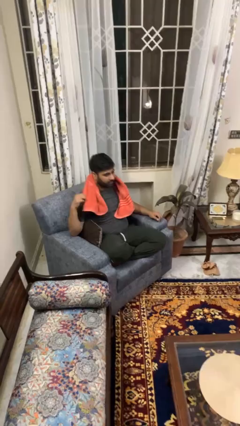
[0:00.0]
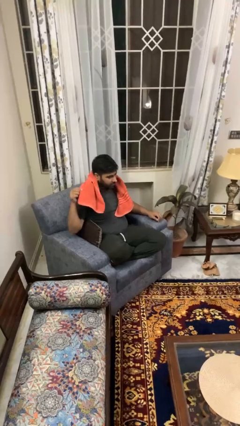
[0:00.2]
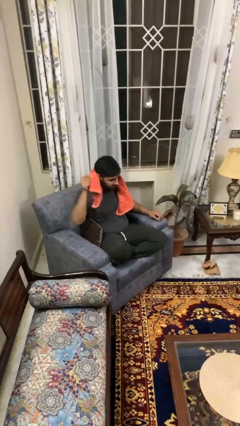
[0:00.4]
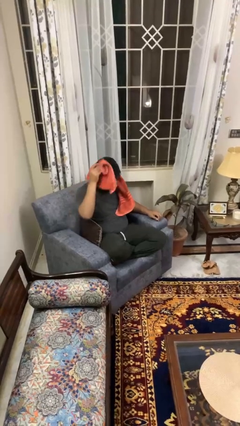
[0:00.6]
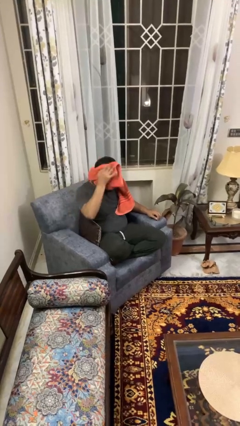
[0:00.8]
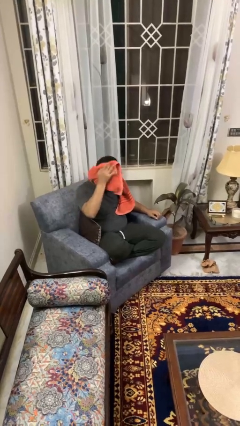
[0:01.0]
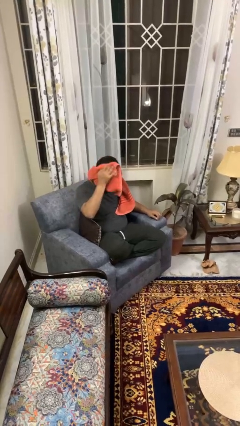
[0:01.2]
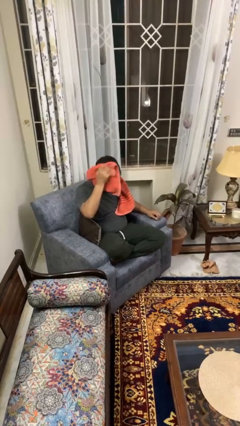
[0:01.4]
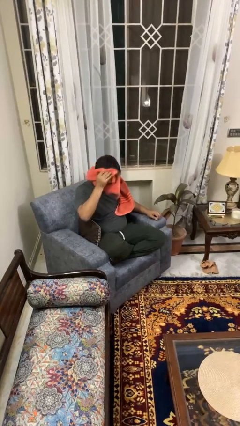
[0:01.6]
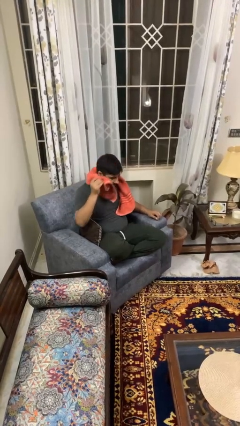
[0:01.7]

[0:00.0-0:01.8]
person dries hair with towel

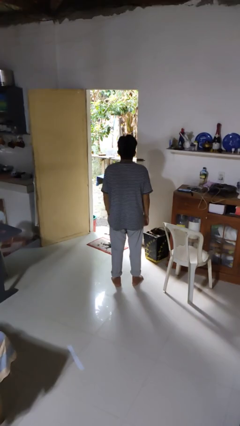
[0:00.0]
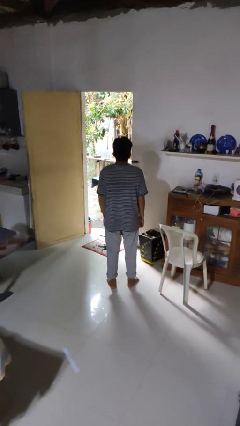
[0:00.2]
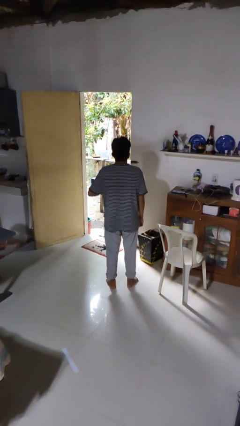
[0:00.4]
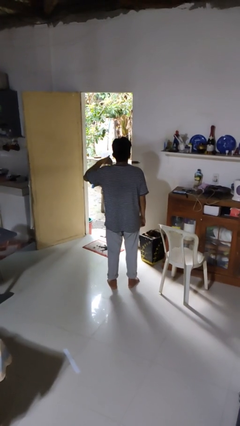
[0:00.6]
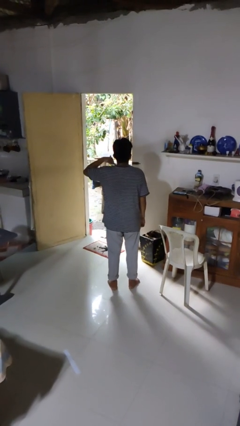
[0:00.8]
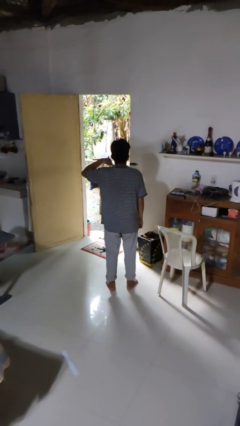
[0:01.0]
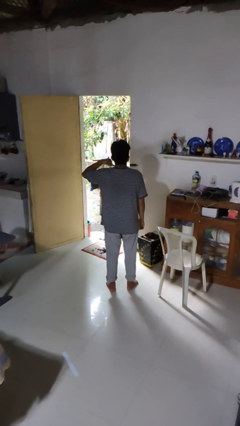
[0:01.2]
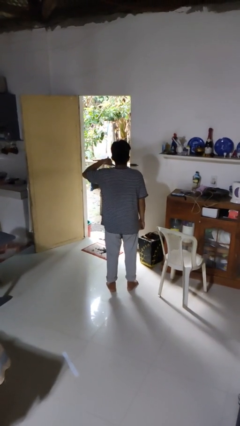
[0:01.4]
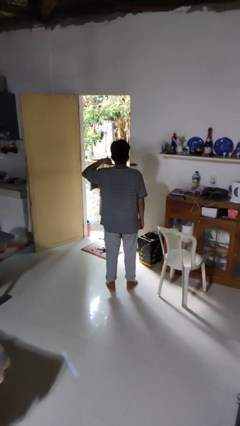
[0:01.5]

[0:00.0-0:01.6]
person gestures call me

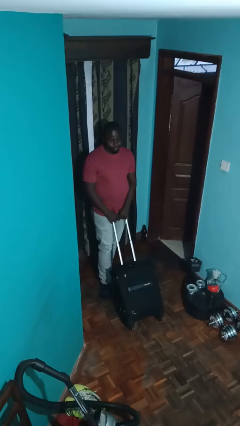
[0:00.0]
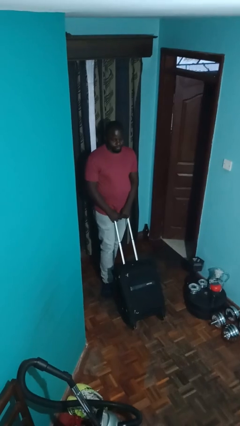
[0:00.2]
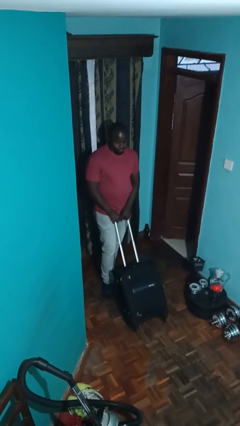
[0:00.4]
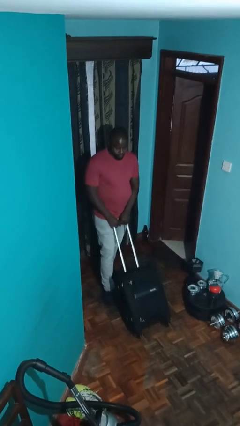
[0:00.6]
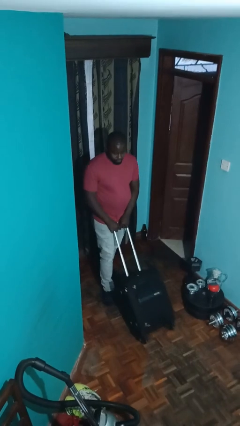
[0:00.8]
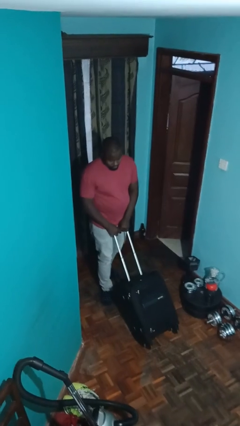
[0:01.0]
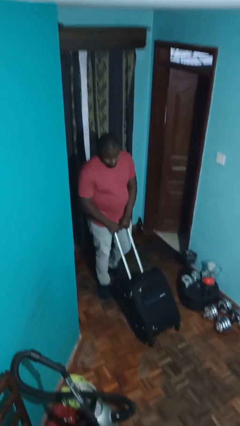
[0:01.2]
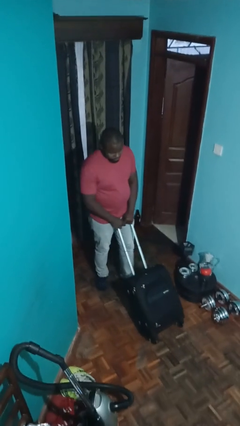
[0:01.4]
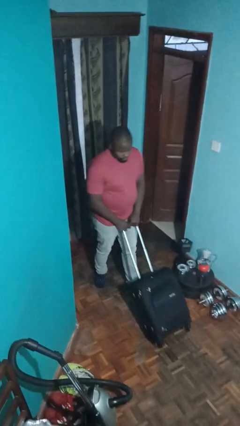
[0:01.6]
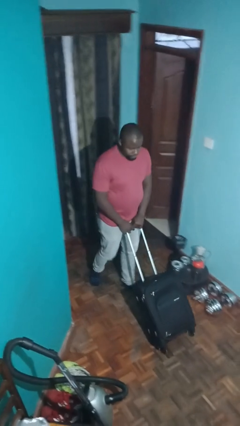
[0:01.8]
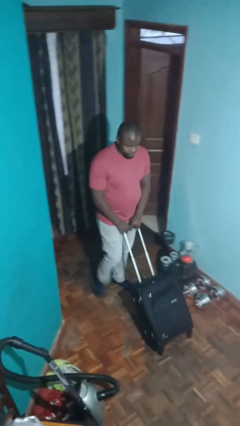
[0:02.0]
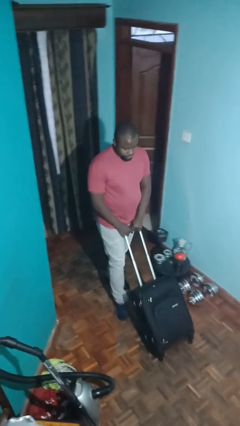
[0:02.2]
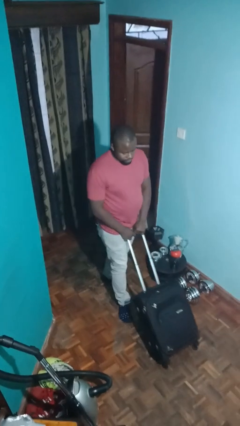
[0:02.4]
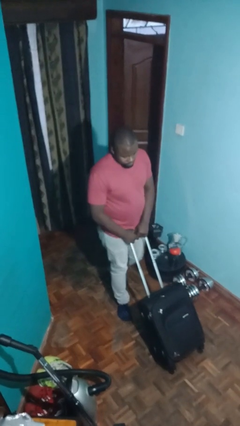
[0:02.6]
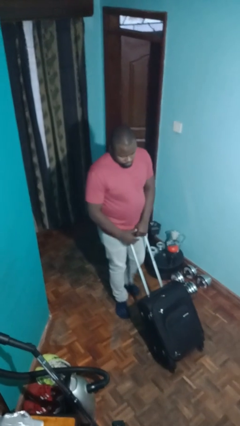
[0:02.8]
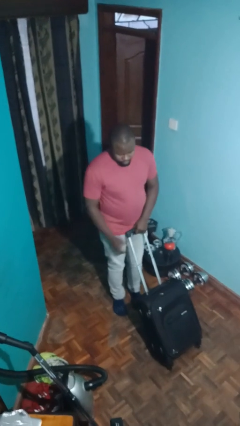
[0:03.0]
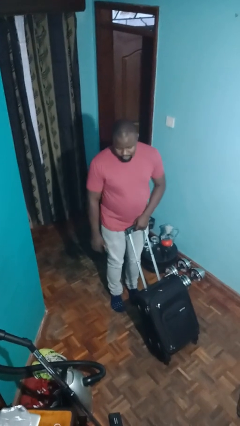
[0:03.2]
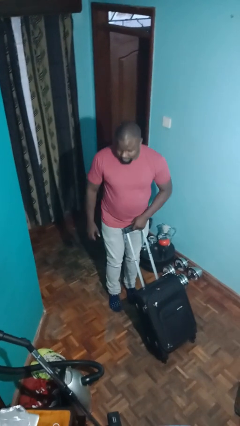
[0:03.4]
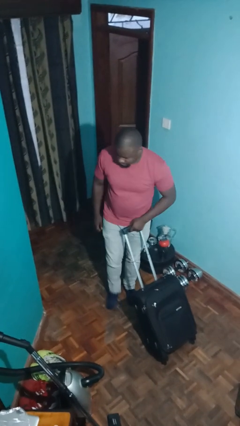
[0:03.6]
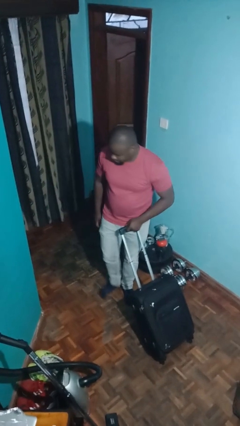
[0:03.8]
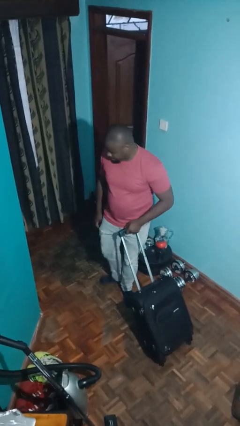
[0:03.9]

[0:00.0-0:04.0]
person pushes wheeled cart

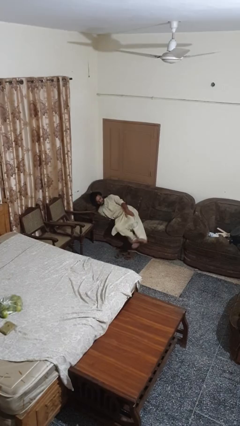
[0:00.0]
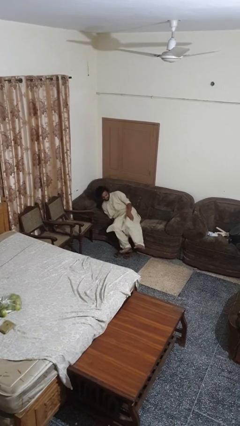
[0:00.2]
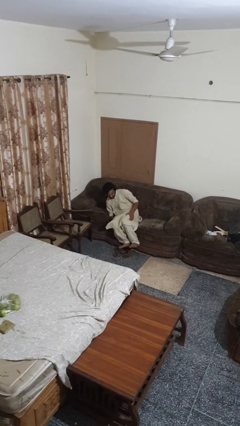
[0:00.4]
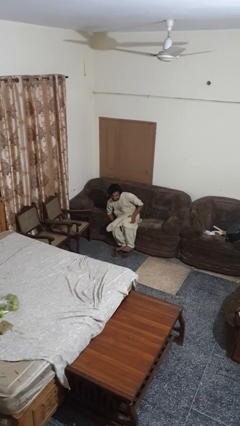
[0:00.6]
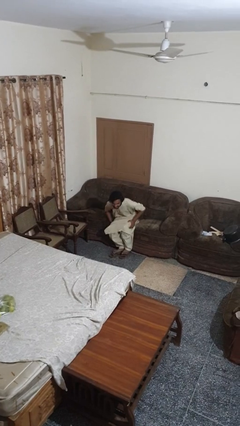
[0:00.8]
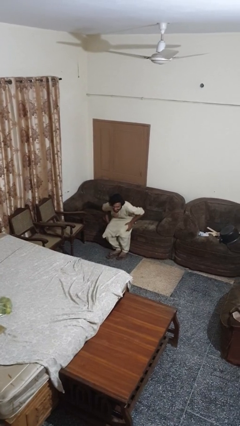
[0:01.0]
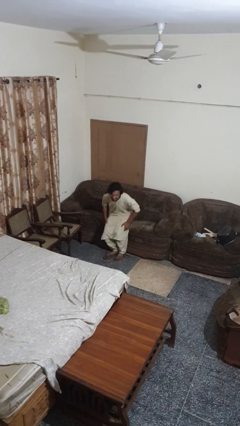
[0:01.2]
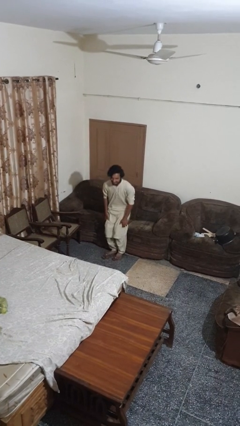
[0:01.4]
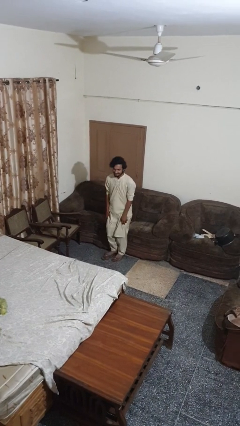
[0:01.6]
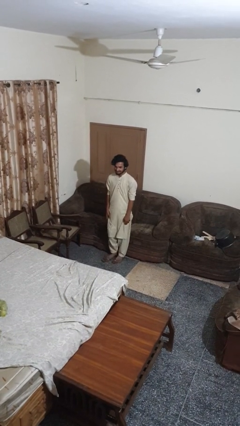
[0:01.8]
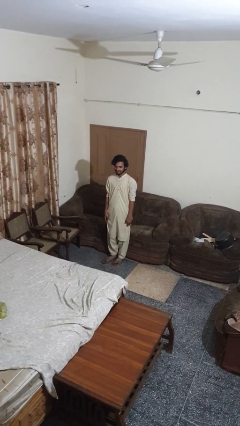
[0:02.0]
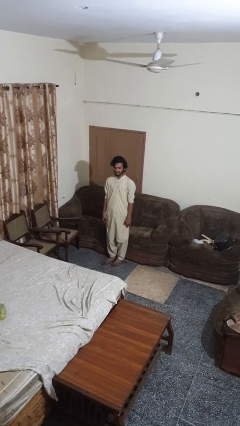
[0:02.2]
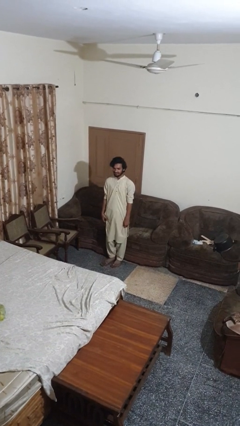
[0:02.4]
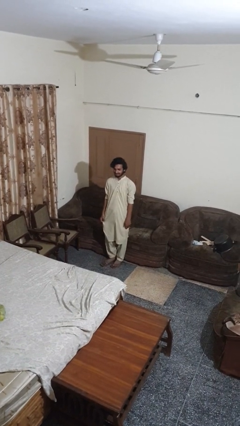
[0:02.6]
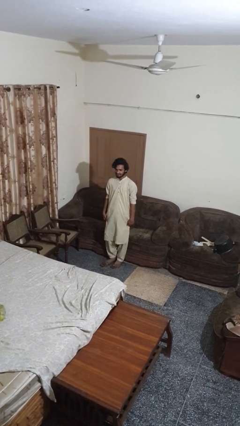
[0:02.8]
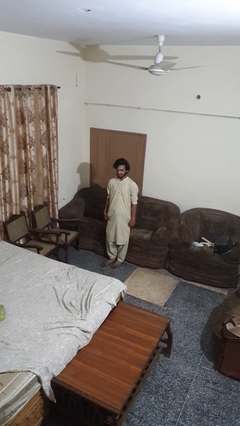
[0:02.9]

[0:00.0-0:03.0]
person stands up

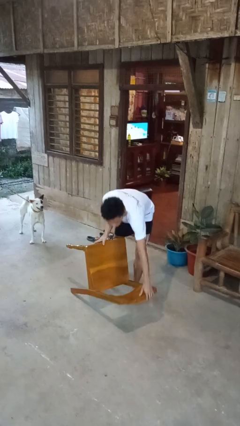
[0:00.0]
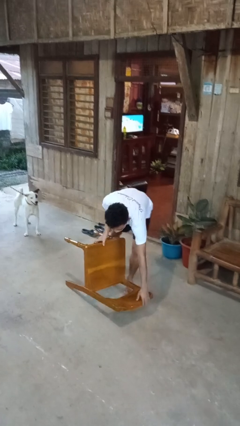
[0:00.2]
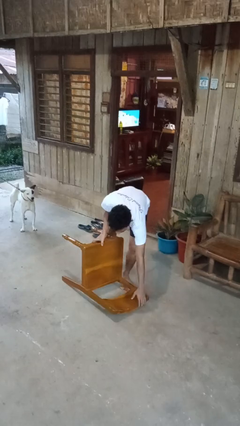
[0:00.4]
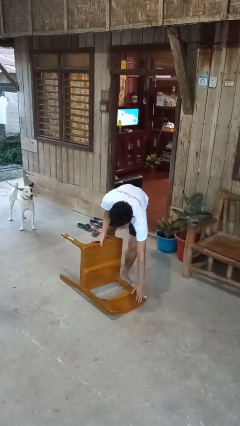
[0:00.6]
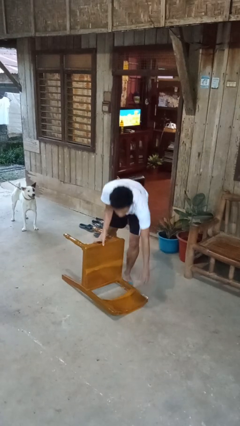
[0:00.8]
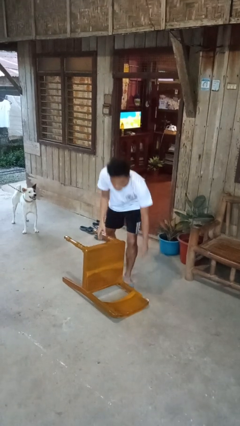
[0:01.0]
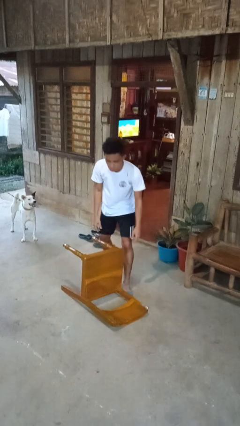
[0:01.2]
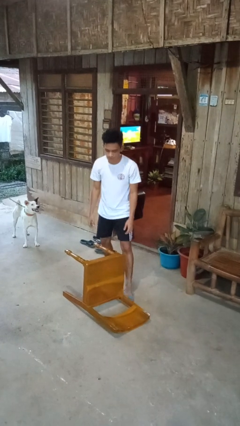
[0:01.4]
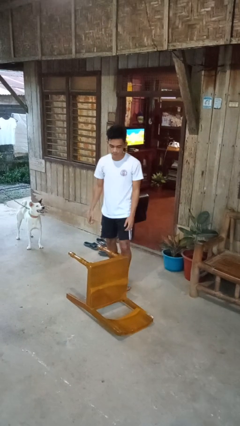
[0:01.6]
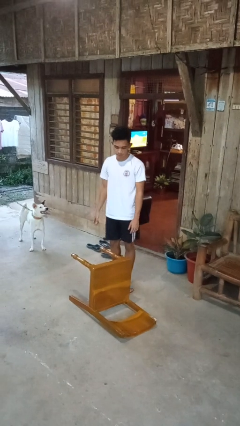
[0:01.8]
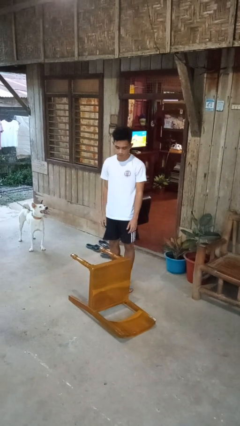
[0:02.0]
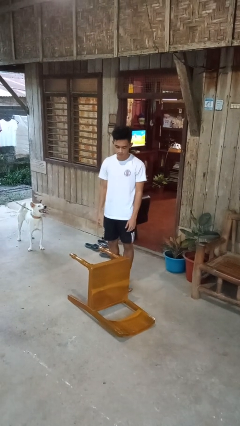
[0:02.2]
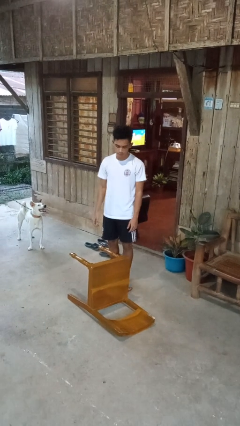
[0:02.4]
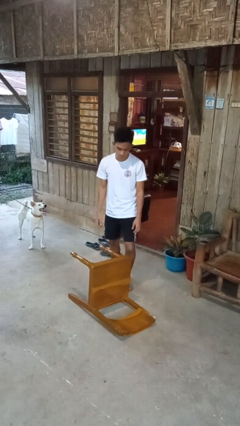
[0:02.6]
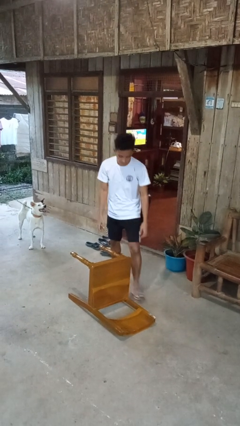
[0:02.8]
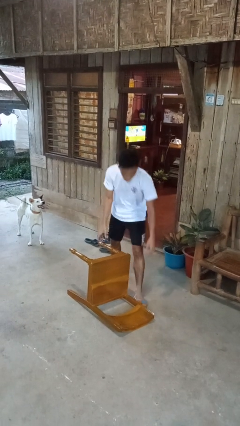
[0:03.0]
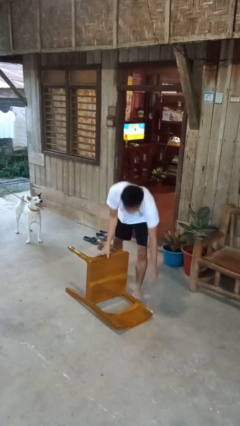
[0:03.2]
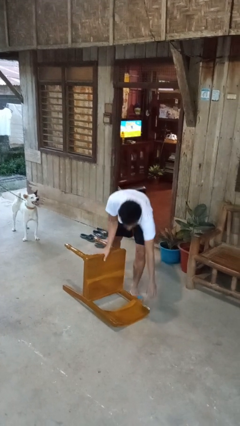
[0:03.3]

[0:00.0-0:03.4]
person knocks over furniture

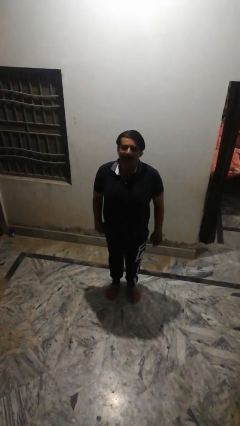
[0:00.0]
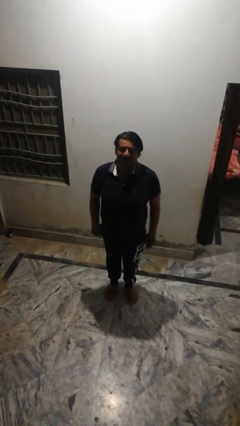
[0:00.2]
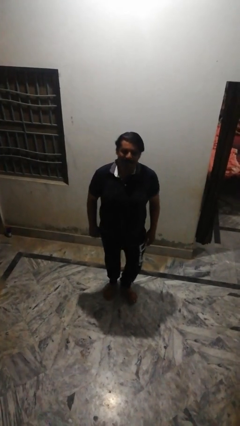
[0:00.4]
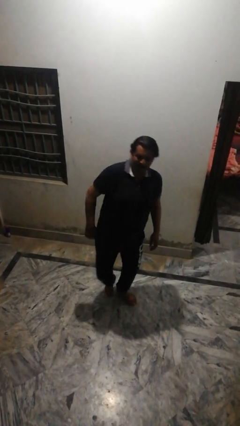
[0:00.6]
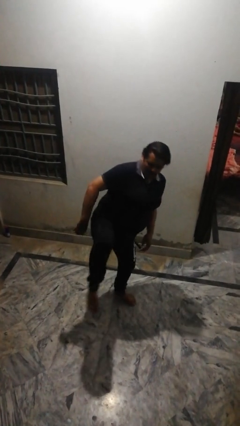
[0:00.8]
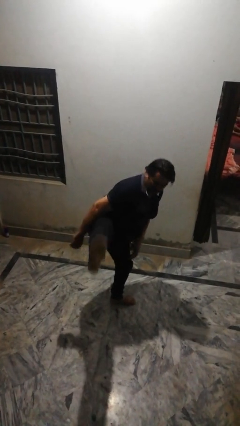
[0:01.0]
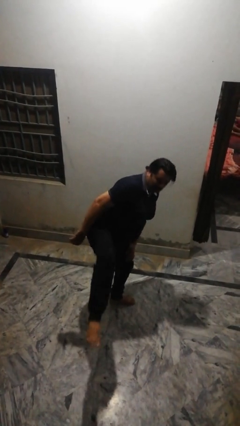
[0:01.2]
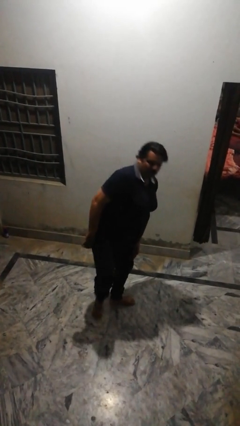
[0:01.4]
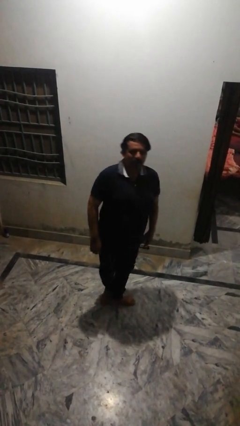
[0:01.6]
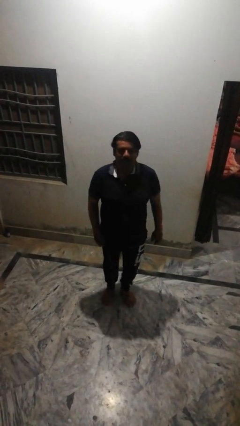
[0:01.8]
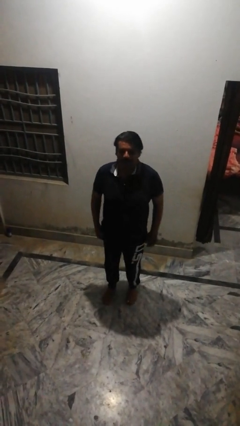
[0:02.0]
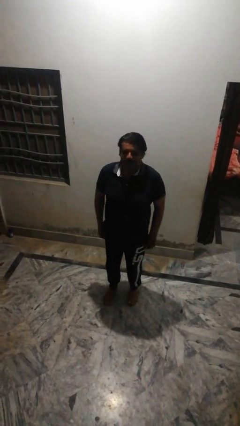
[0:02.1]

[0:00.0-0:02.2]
person karate kicks

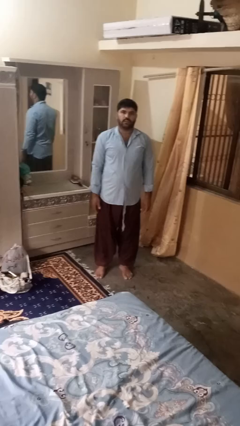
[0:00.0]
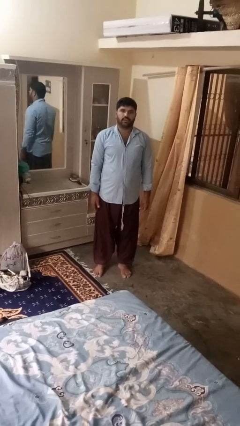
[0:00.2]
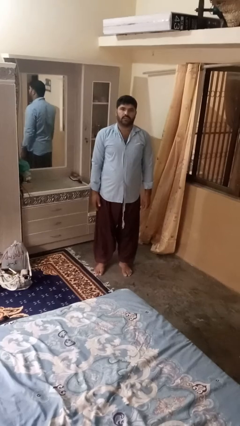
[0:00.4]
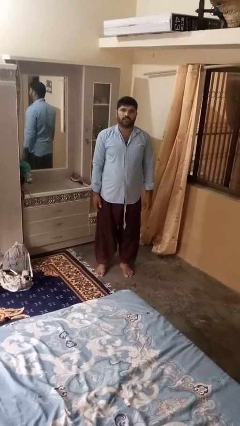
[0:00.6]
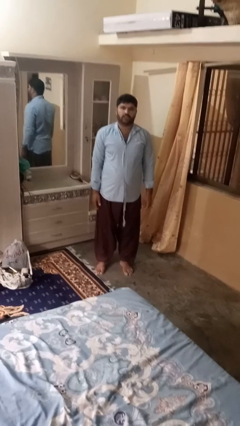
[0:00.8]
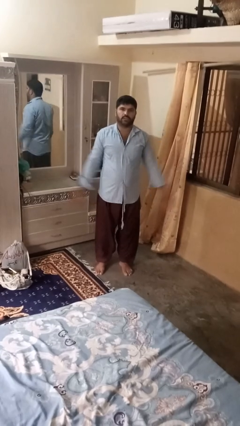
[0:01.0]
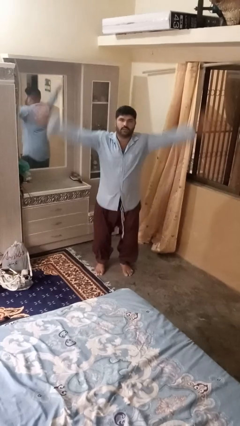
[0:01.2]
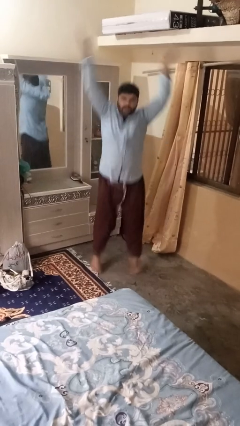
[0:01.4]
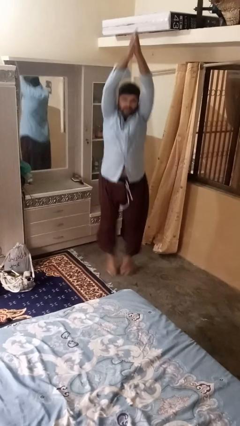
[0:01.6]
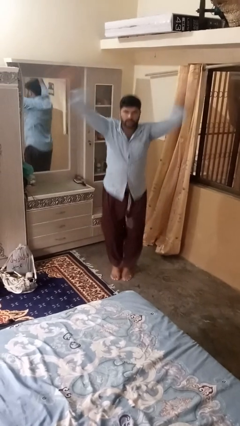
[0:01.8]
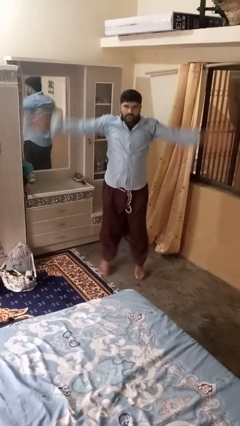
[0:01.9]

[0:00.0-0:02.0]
person exercises with jumping jacks
